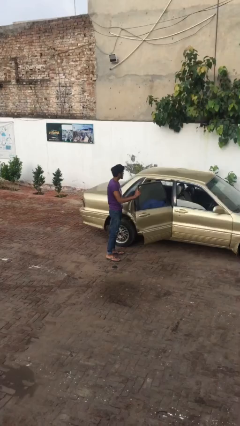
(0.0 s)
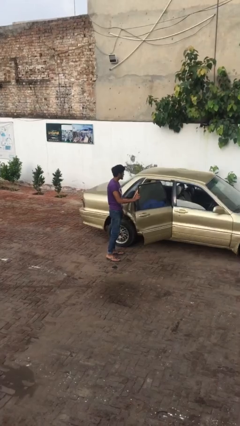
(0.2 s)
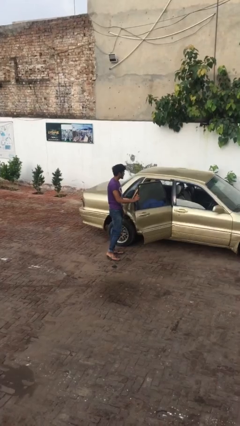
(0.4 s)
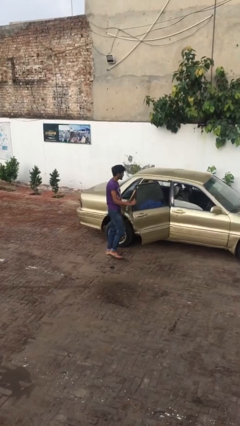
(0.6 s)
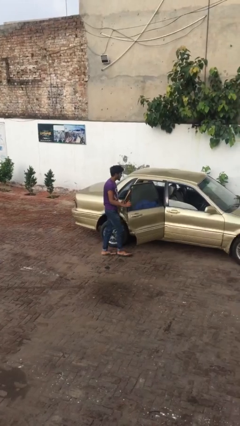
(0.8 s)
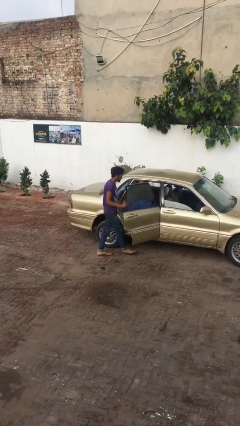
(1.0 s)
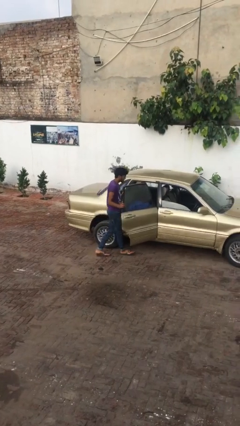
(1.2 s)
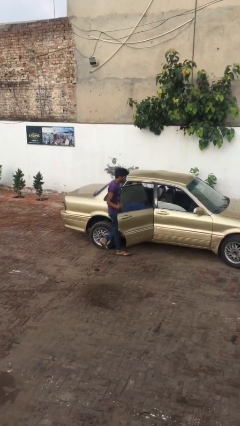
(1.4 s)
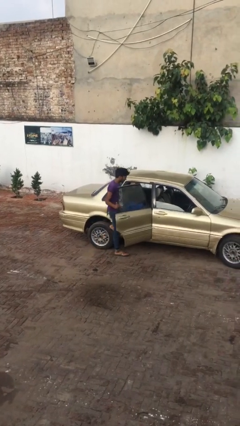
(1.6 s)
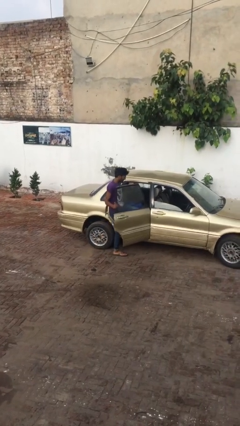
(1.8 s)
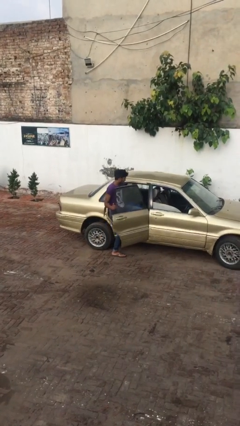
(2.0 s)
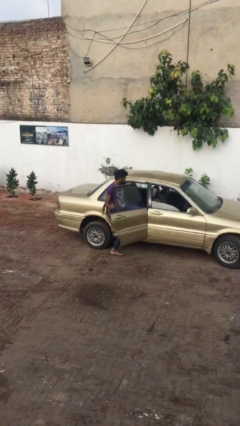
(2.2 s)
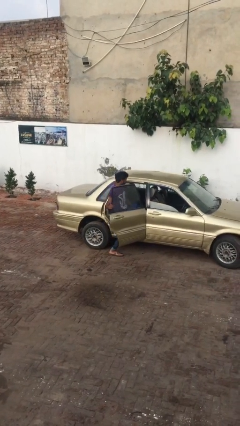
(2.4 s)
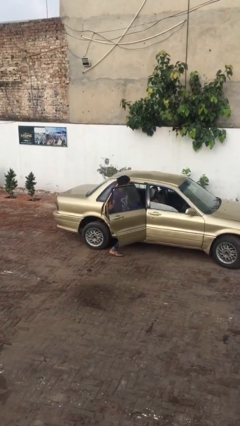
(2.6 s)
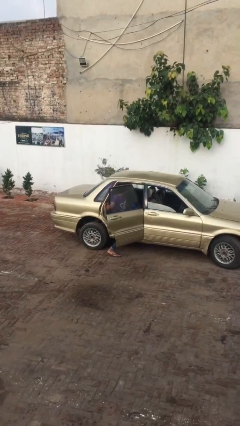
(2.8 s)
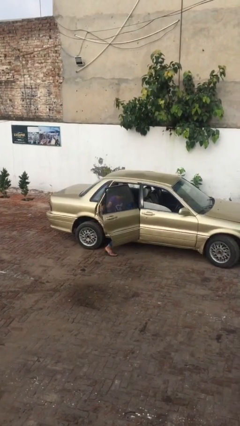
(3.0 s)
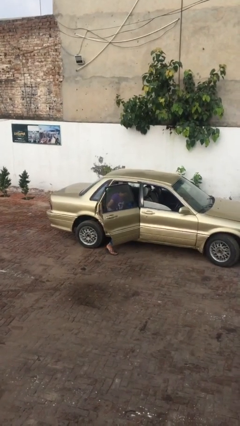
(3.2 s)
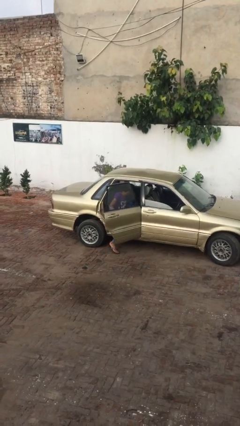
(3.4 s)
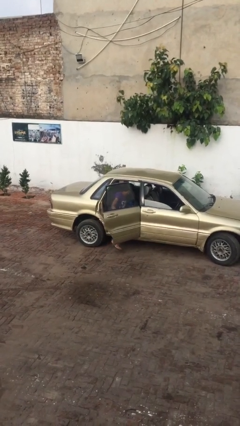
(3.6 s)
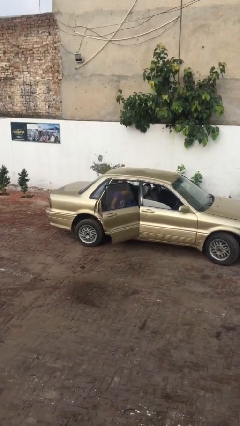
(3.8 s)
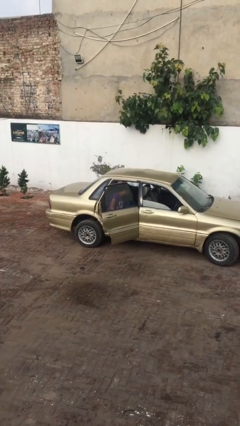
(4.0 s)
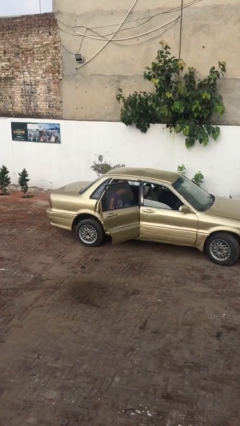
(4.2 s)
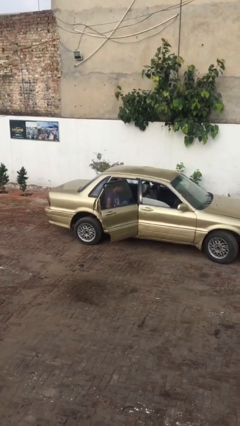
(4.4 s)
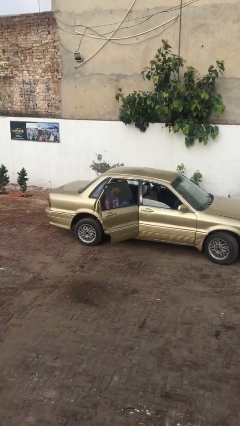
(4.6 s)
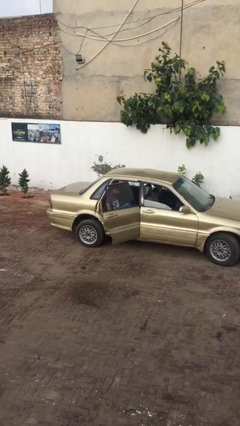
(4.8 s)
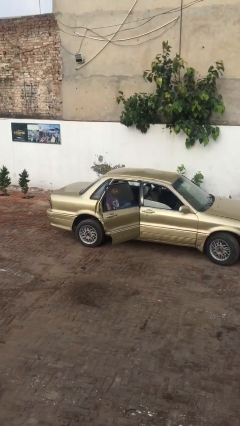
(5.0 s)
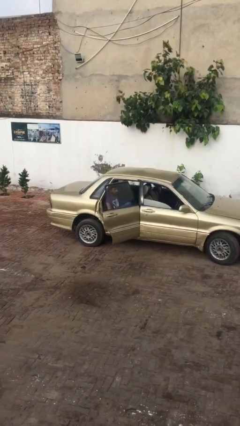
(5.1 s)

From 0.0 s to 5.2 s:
person enters car

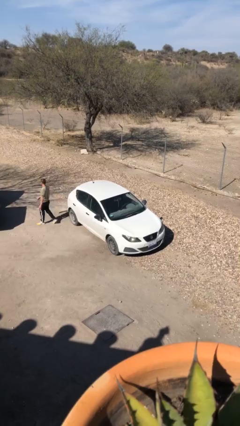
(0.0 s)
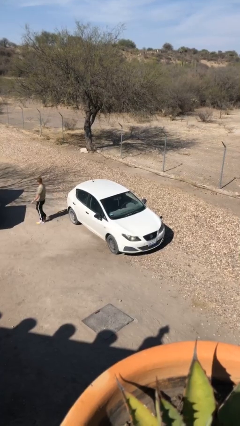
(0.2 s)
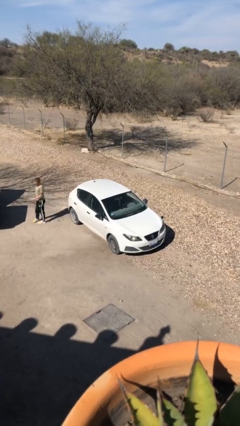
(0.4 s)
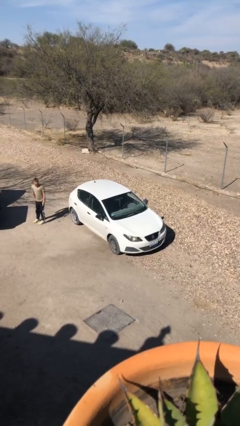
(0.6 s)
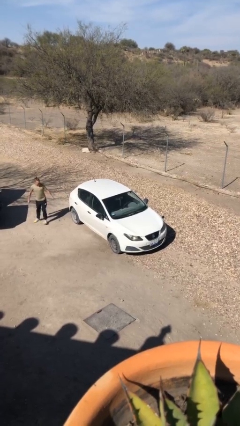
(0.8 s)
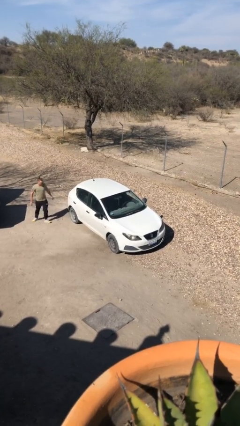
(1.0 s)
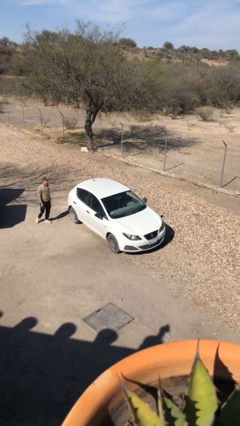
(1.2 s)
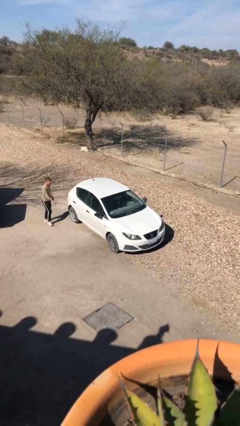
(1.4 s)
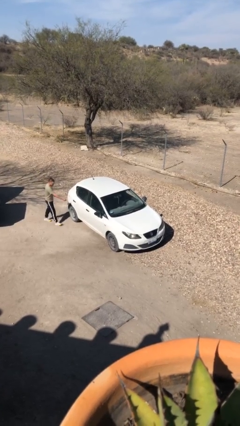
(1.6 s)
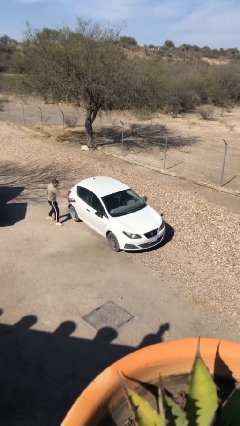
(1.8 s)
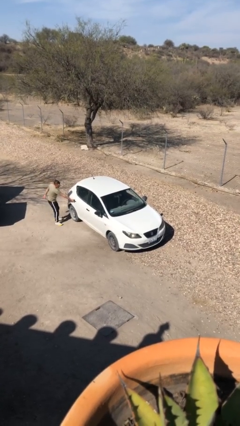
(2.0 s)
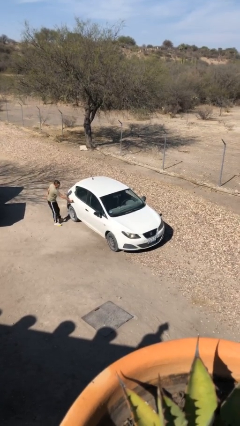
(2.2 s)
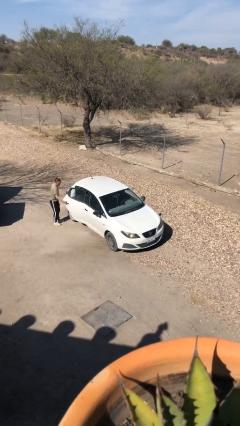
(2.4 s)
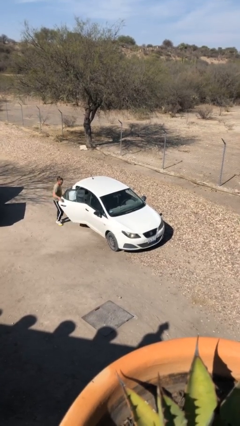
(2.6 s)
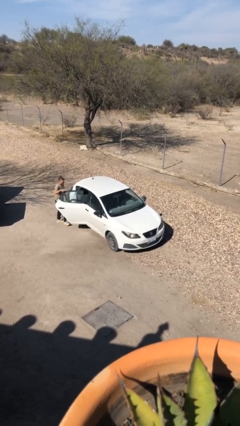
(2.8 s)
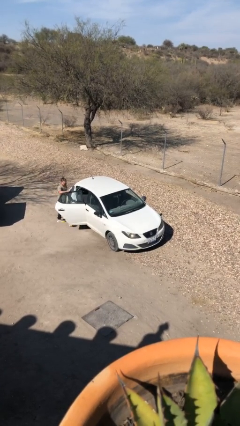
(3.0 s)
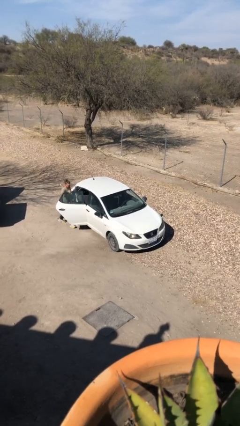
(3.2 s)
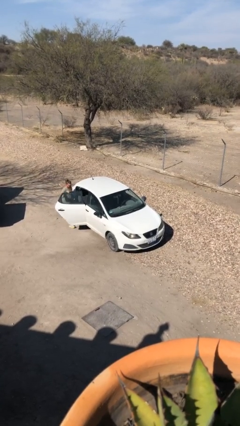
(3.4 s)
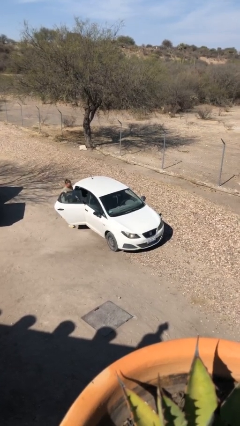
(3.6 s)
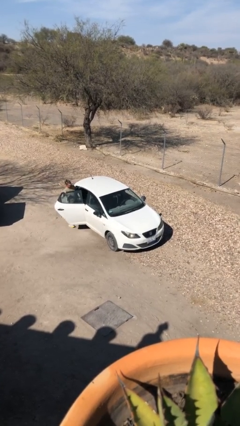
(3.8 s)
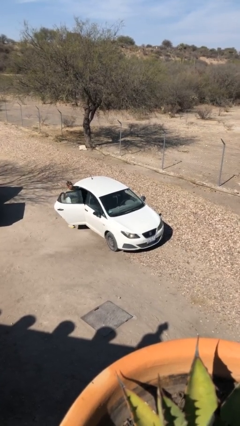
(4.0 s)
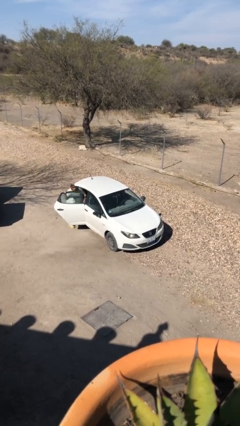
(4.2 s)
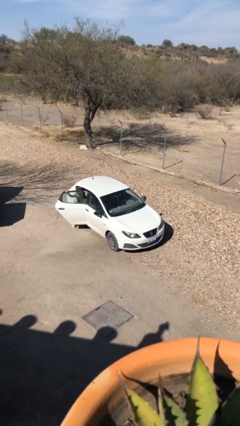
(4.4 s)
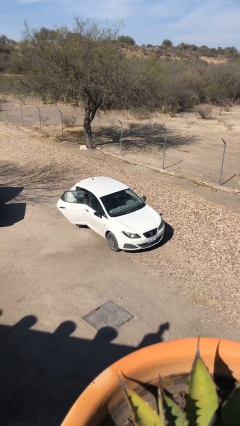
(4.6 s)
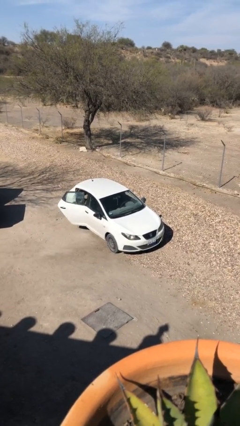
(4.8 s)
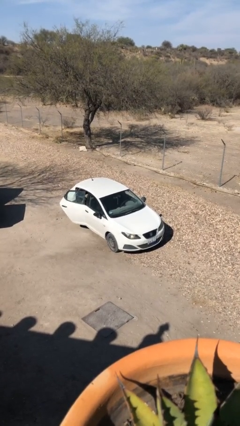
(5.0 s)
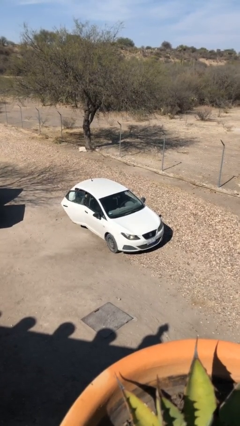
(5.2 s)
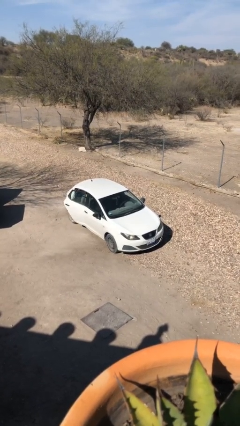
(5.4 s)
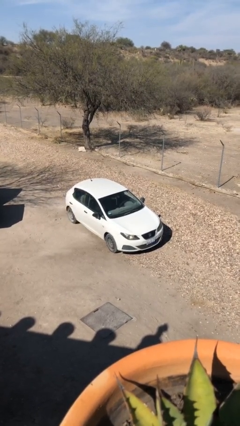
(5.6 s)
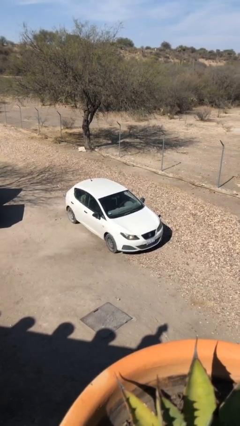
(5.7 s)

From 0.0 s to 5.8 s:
car picks up person

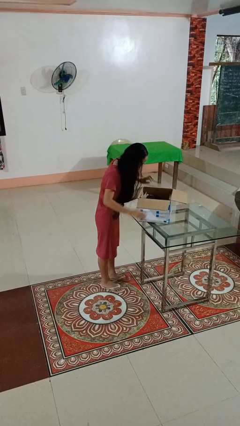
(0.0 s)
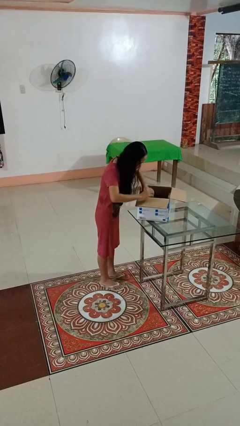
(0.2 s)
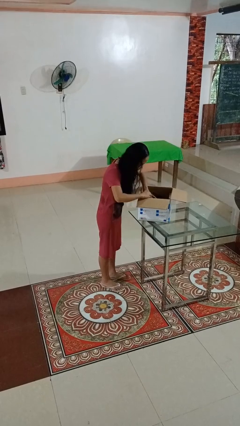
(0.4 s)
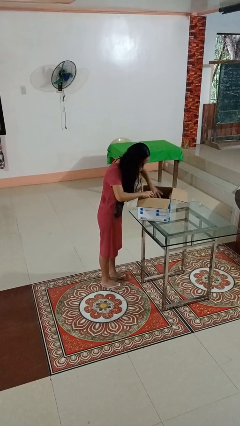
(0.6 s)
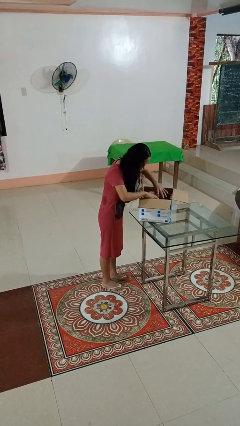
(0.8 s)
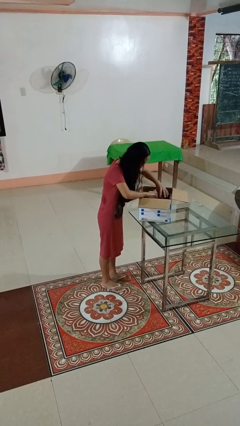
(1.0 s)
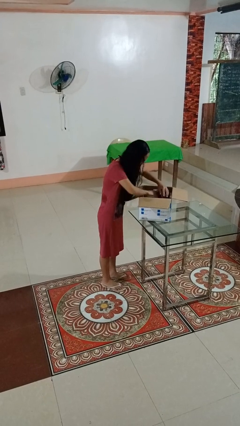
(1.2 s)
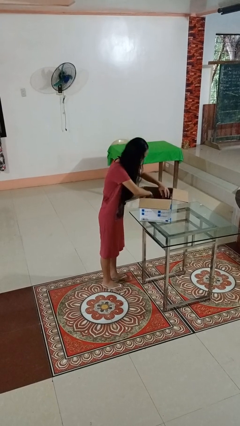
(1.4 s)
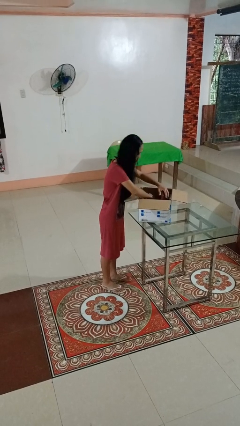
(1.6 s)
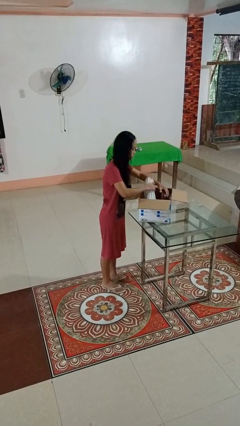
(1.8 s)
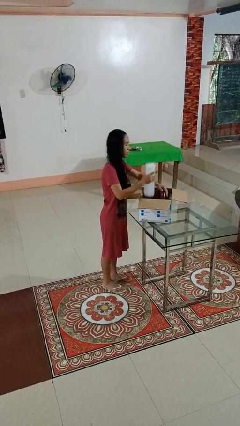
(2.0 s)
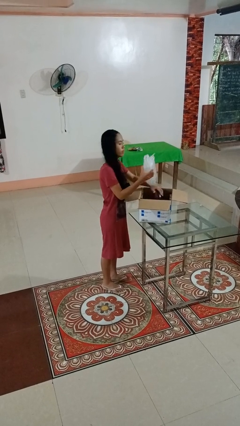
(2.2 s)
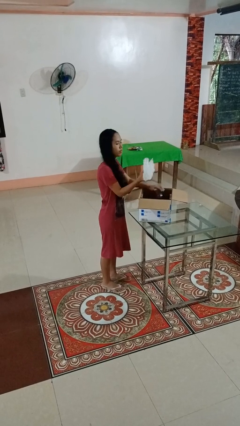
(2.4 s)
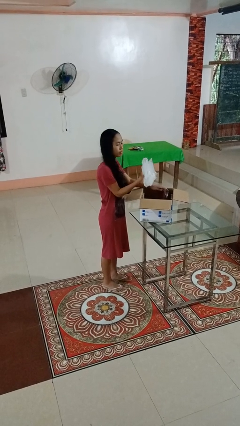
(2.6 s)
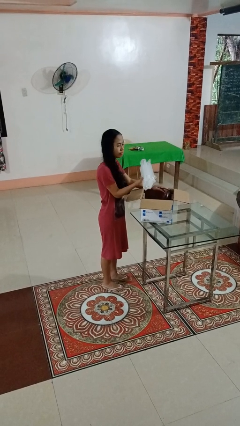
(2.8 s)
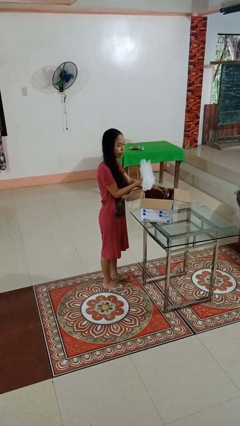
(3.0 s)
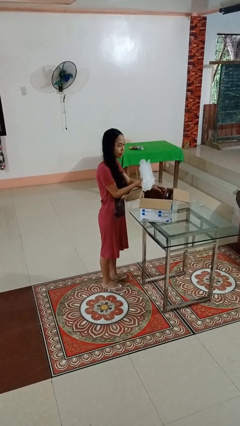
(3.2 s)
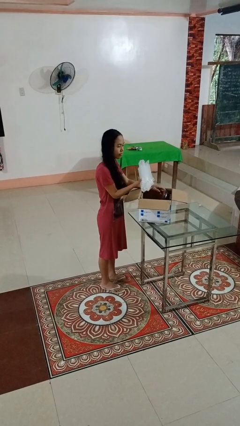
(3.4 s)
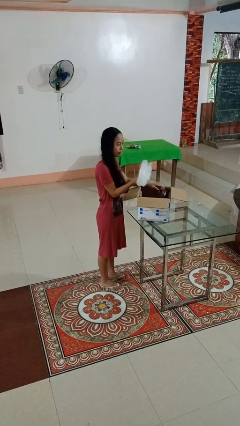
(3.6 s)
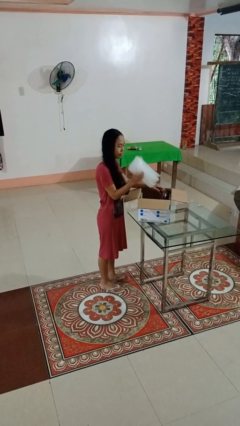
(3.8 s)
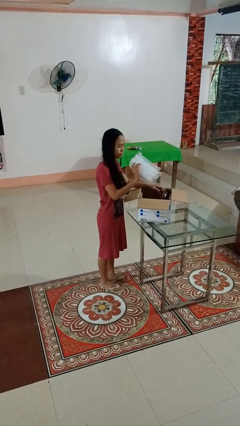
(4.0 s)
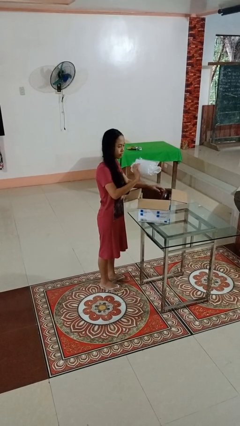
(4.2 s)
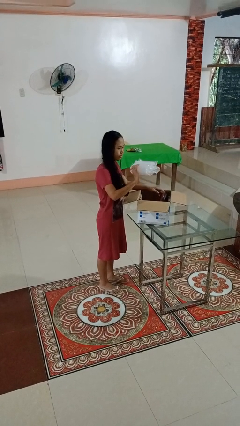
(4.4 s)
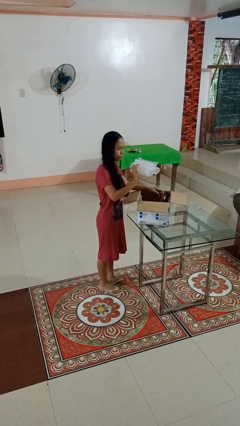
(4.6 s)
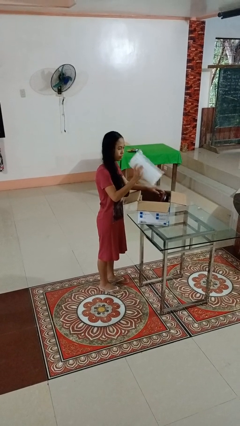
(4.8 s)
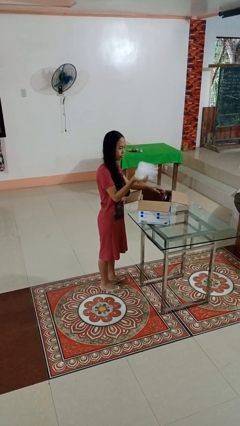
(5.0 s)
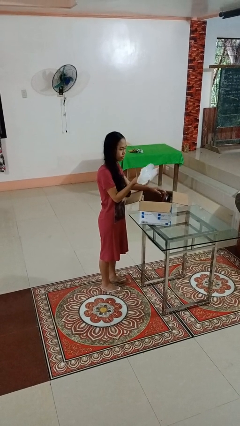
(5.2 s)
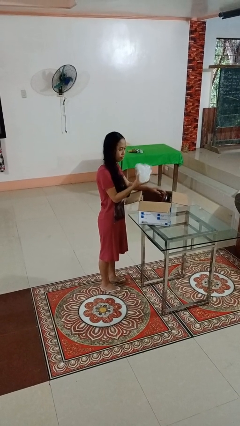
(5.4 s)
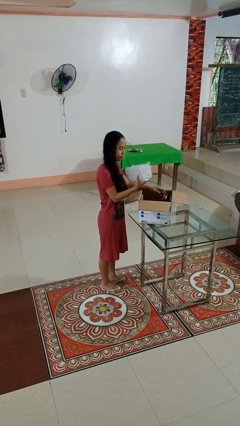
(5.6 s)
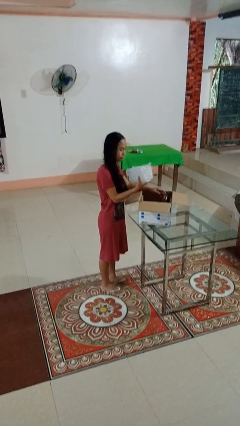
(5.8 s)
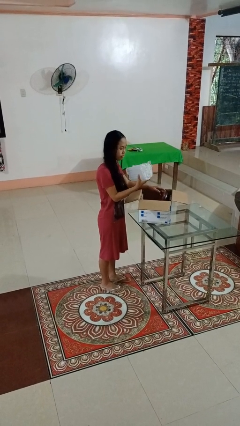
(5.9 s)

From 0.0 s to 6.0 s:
person takes object from box

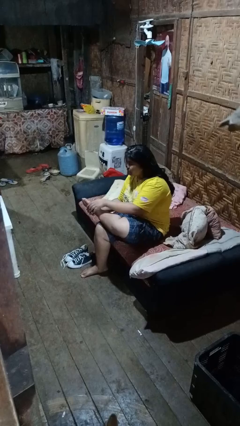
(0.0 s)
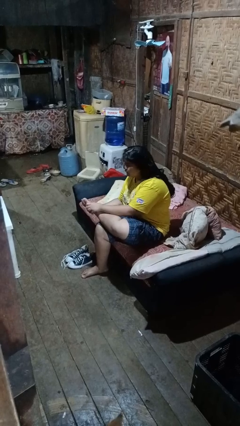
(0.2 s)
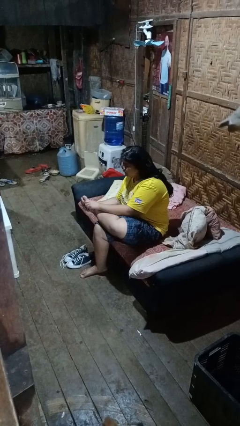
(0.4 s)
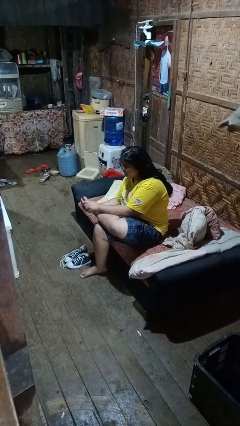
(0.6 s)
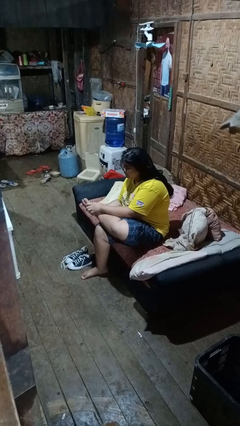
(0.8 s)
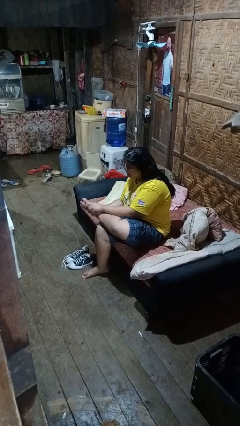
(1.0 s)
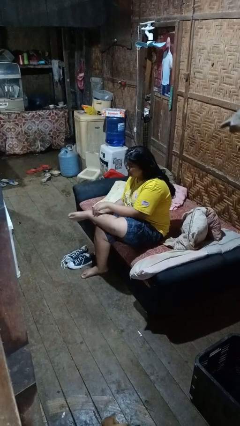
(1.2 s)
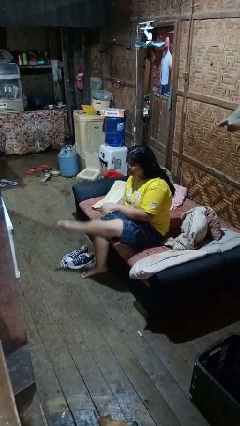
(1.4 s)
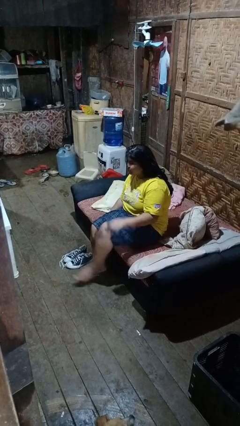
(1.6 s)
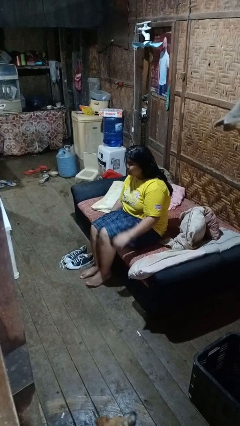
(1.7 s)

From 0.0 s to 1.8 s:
person rubs foot
